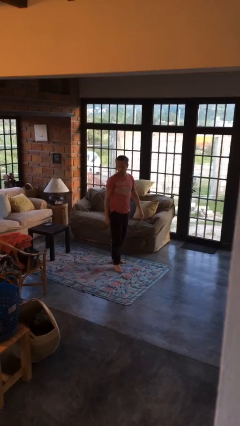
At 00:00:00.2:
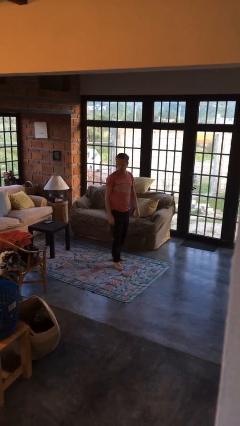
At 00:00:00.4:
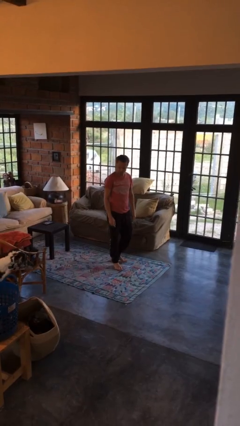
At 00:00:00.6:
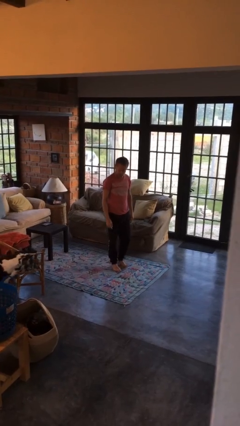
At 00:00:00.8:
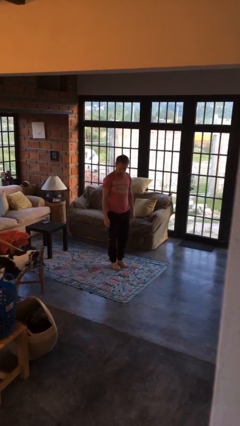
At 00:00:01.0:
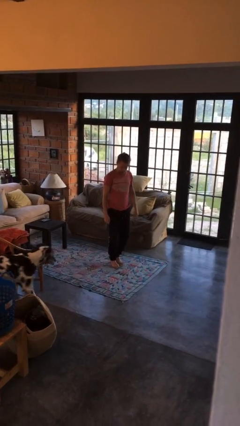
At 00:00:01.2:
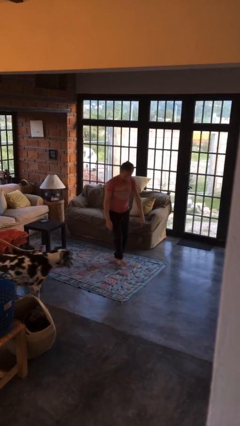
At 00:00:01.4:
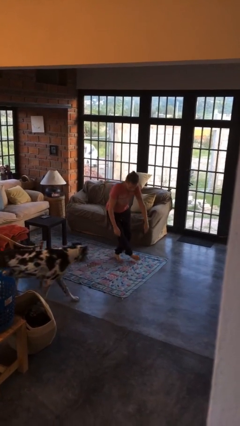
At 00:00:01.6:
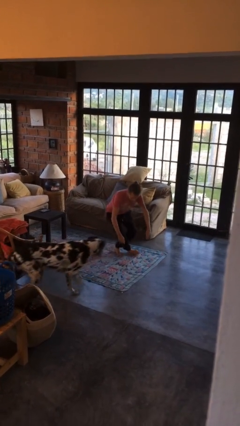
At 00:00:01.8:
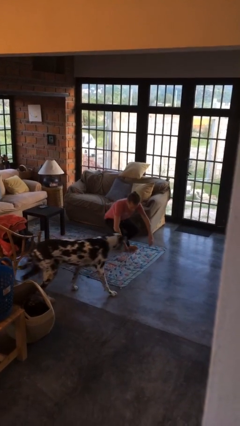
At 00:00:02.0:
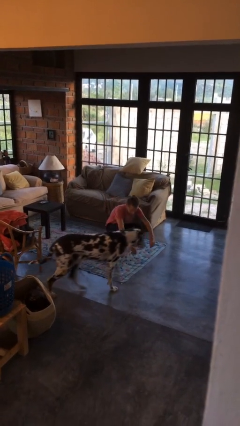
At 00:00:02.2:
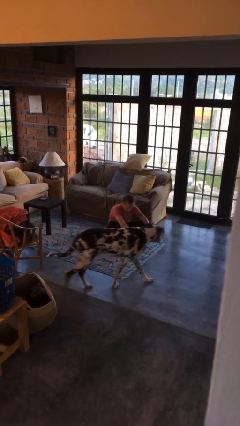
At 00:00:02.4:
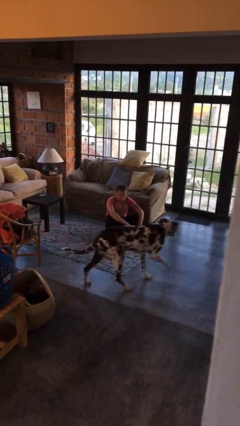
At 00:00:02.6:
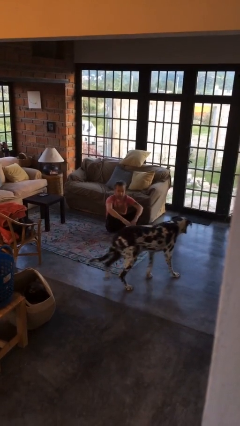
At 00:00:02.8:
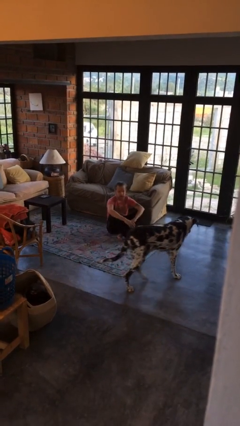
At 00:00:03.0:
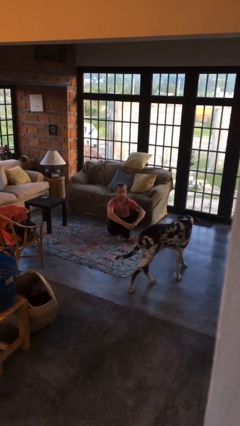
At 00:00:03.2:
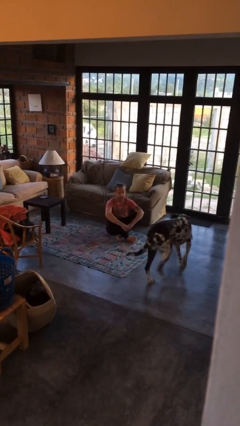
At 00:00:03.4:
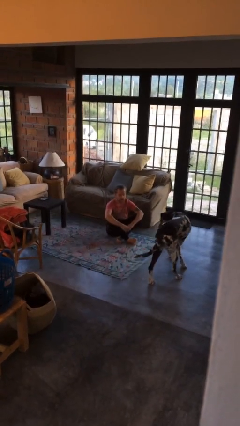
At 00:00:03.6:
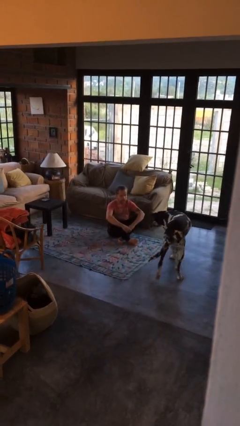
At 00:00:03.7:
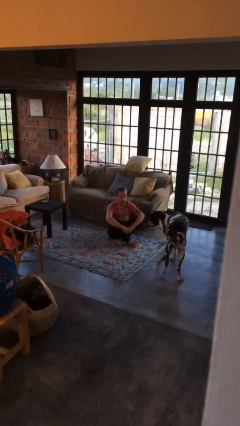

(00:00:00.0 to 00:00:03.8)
person sits crisscross

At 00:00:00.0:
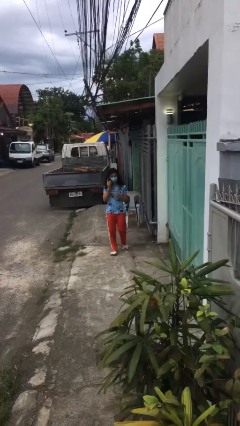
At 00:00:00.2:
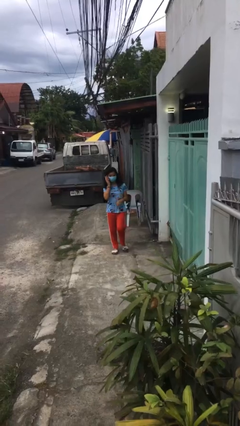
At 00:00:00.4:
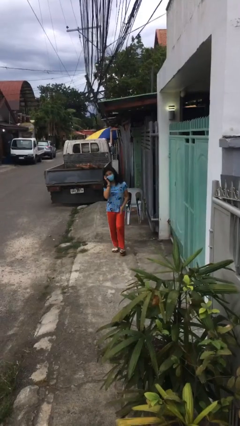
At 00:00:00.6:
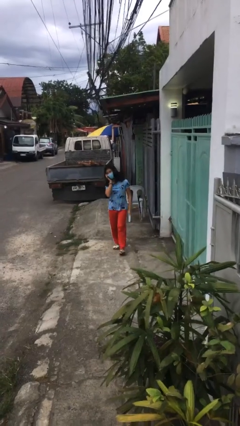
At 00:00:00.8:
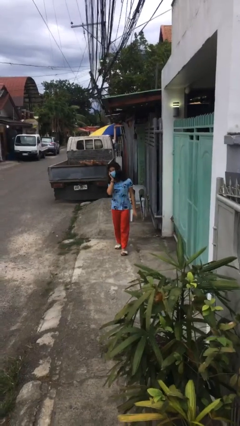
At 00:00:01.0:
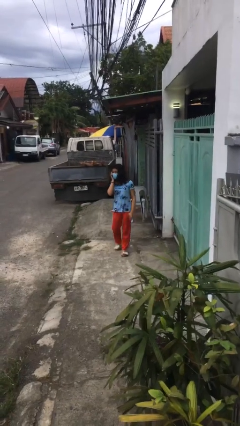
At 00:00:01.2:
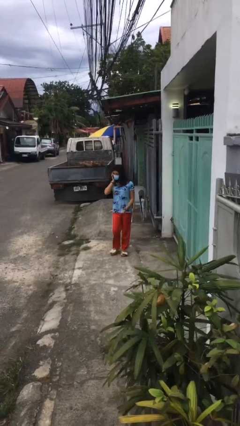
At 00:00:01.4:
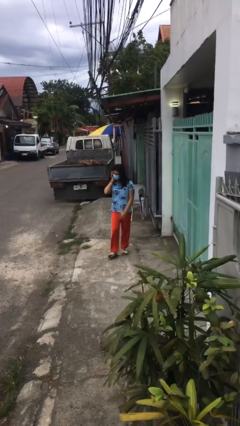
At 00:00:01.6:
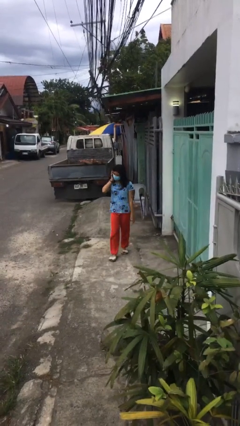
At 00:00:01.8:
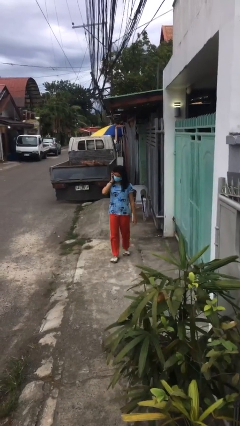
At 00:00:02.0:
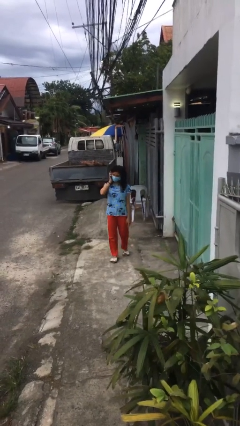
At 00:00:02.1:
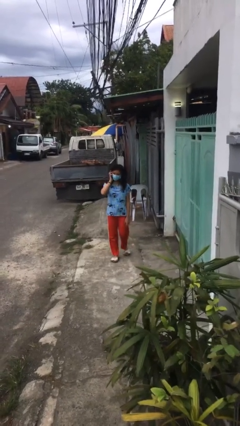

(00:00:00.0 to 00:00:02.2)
person talks on phone

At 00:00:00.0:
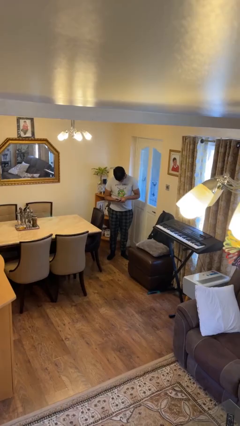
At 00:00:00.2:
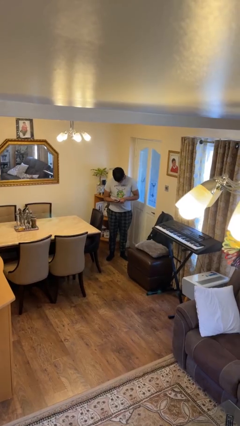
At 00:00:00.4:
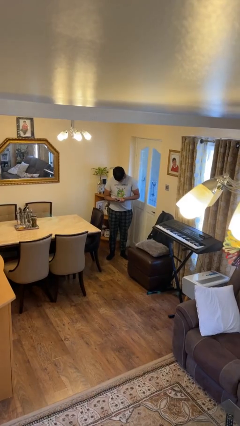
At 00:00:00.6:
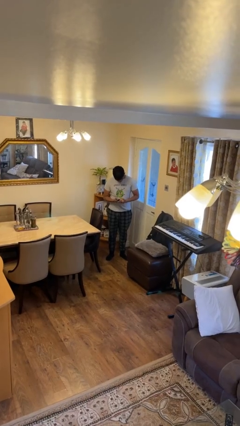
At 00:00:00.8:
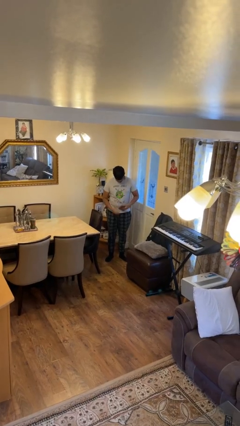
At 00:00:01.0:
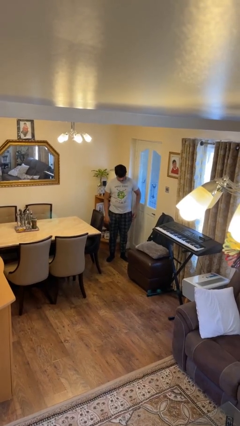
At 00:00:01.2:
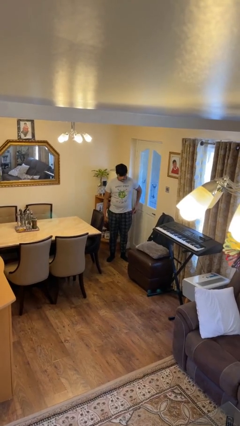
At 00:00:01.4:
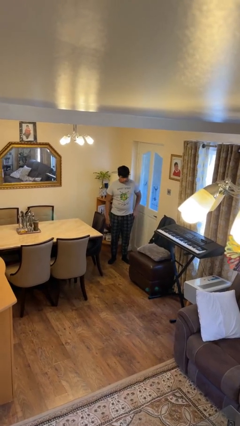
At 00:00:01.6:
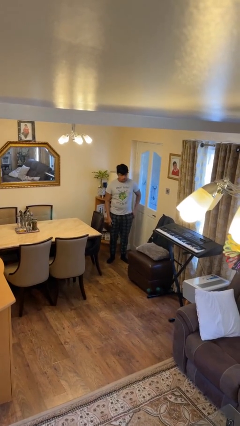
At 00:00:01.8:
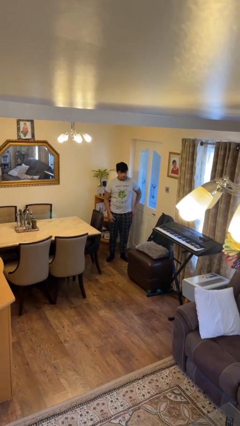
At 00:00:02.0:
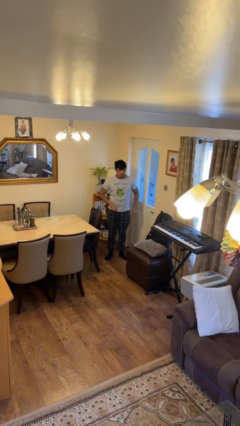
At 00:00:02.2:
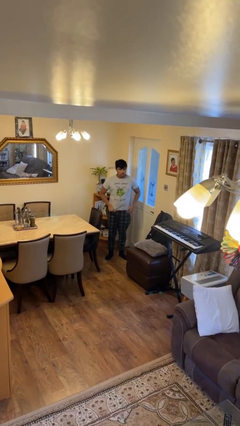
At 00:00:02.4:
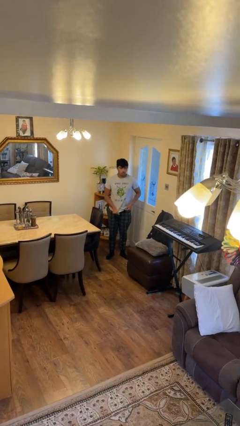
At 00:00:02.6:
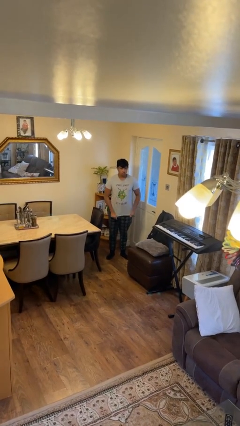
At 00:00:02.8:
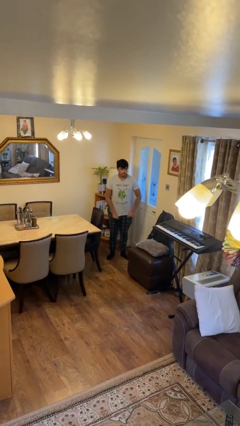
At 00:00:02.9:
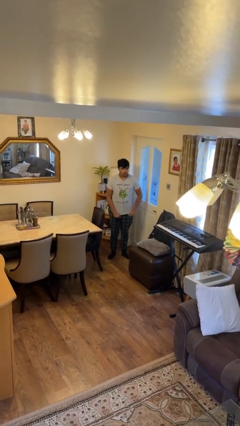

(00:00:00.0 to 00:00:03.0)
person puts phone into pocket

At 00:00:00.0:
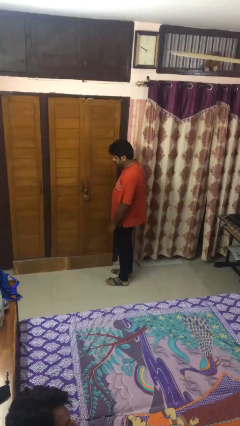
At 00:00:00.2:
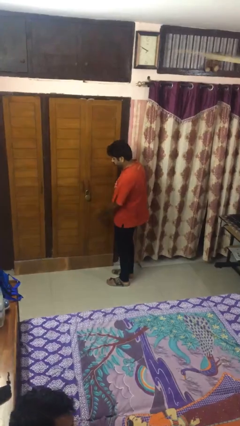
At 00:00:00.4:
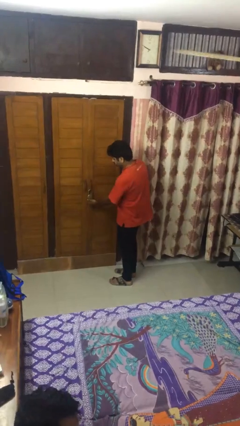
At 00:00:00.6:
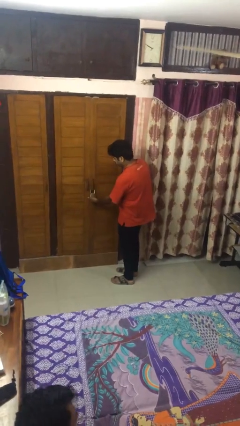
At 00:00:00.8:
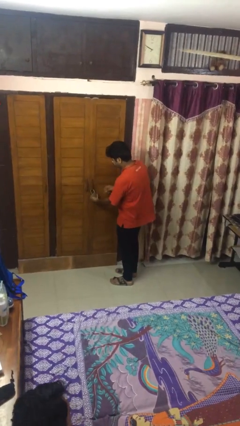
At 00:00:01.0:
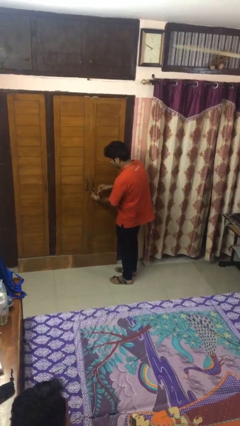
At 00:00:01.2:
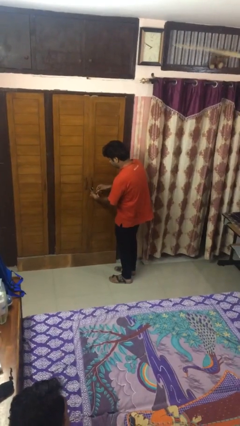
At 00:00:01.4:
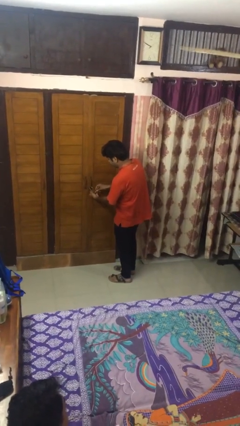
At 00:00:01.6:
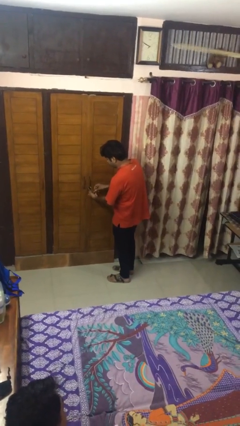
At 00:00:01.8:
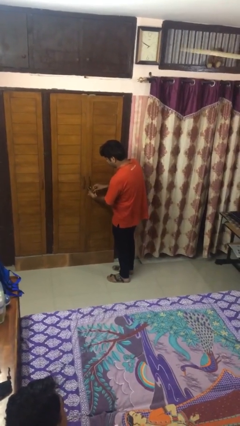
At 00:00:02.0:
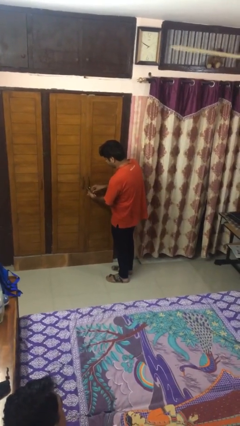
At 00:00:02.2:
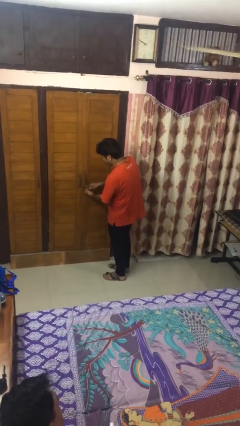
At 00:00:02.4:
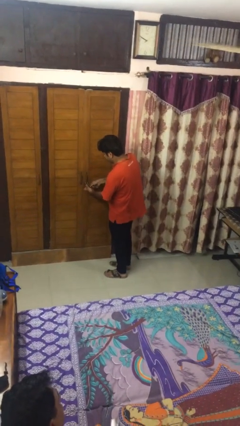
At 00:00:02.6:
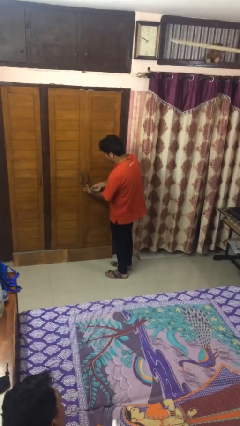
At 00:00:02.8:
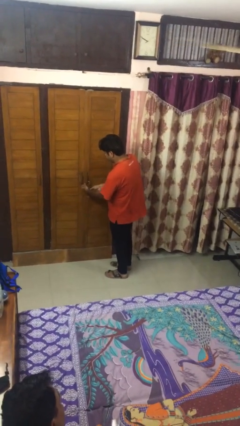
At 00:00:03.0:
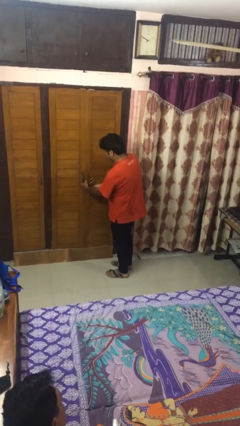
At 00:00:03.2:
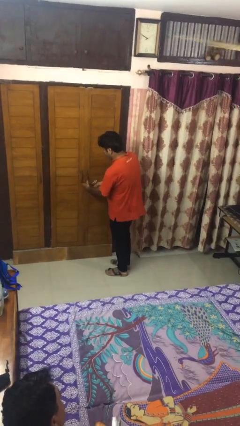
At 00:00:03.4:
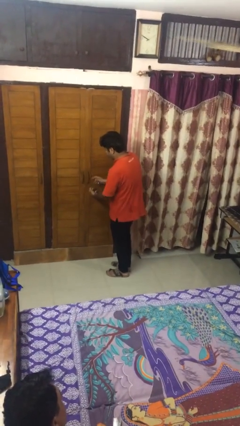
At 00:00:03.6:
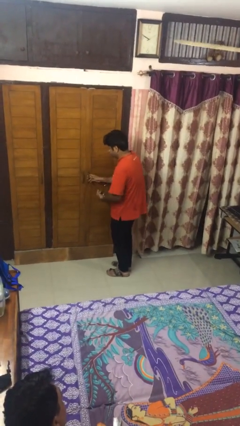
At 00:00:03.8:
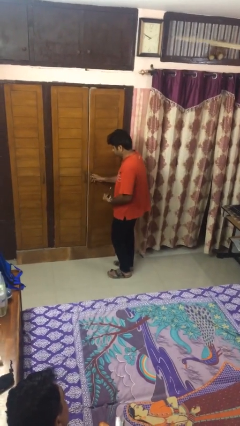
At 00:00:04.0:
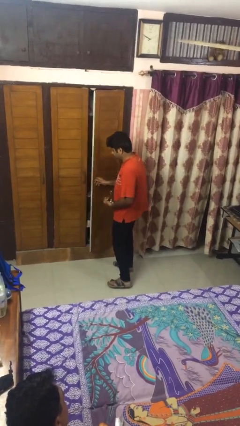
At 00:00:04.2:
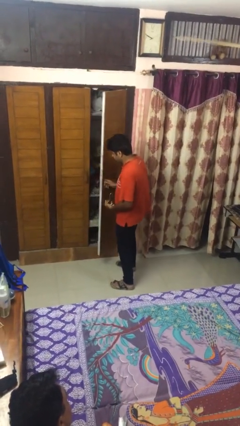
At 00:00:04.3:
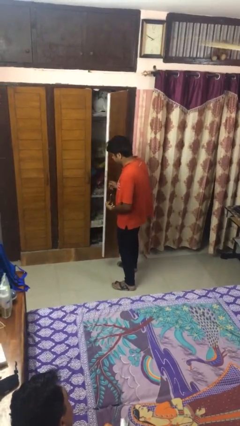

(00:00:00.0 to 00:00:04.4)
person unlocks door with keys

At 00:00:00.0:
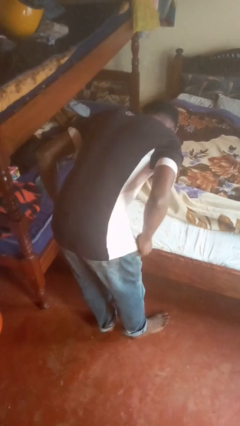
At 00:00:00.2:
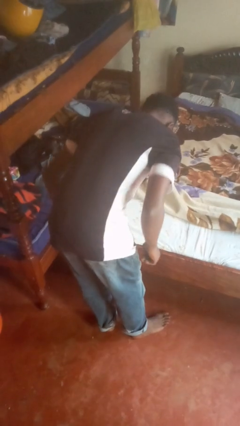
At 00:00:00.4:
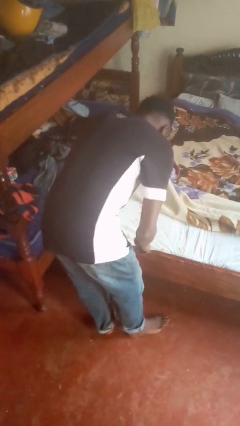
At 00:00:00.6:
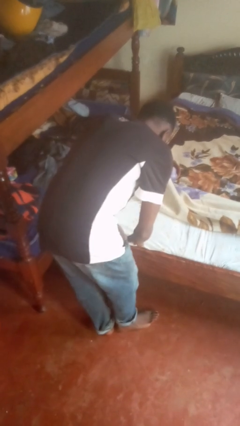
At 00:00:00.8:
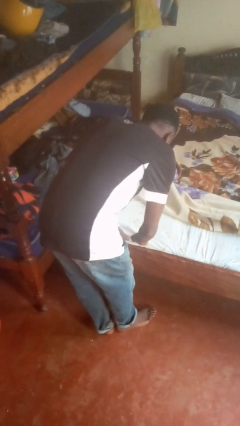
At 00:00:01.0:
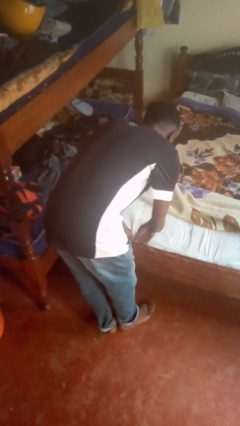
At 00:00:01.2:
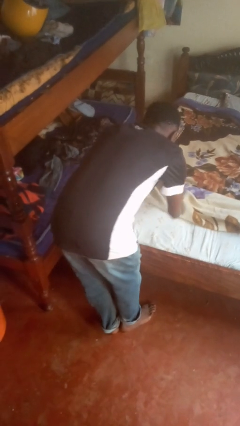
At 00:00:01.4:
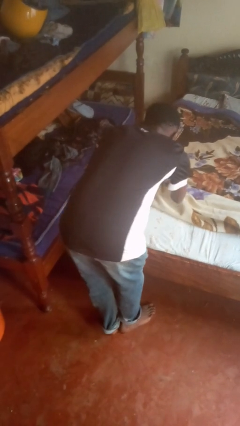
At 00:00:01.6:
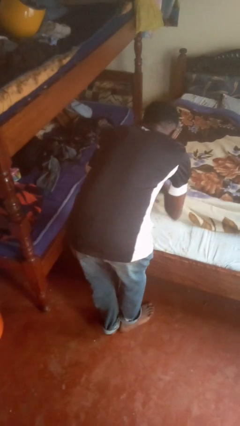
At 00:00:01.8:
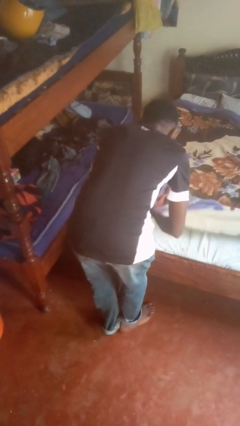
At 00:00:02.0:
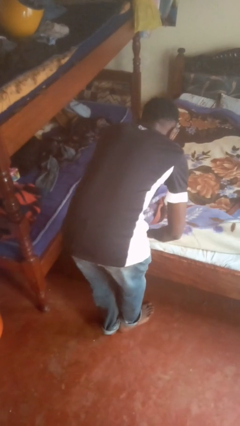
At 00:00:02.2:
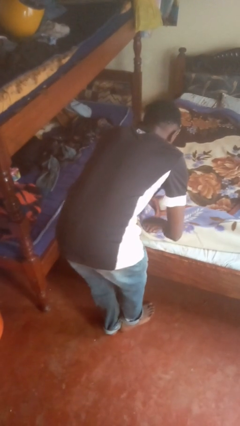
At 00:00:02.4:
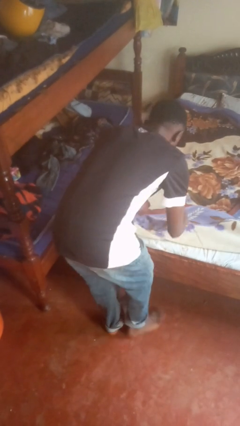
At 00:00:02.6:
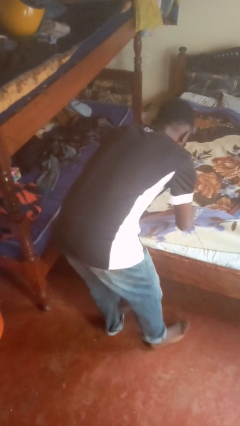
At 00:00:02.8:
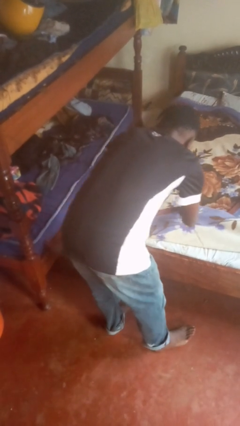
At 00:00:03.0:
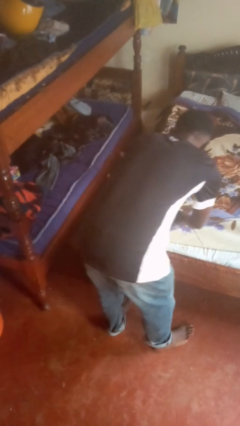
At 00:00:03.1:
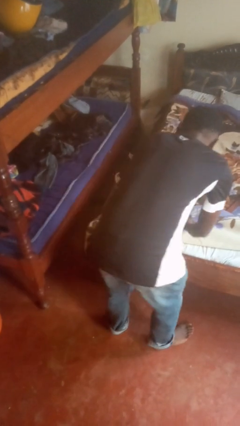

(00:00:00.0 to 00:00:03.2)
person makes bed

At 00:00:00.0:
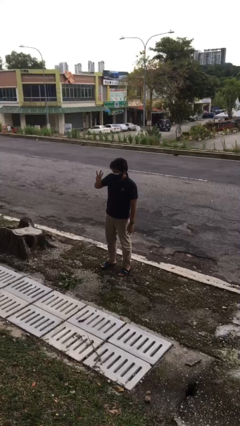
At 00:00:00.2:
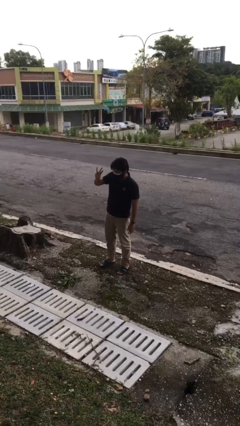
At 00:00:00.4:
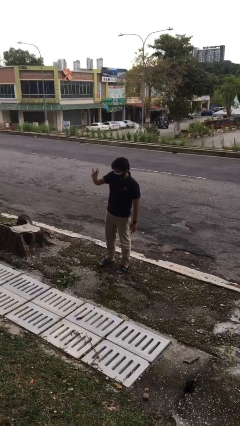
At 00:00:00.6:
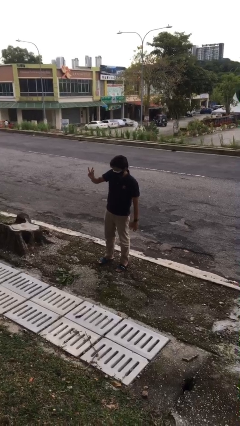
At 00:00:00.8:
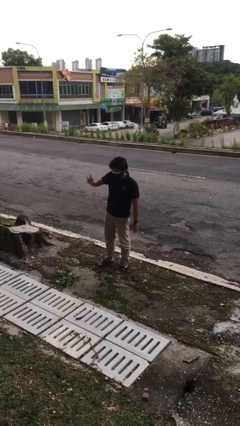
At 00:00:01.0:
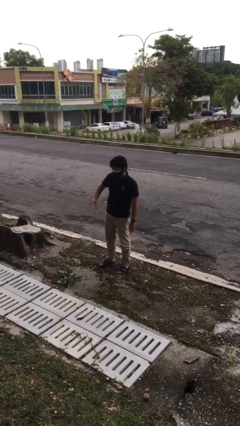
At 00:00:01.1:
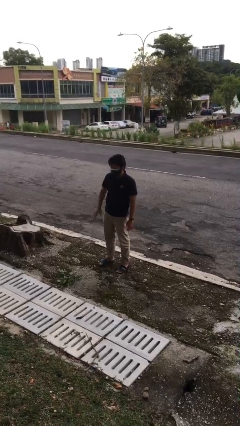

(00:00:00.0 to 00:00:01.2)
person gestures number three
